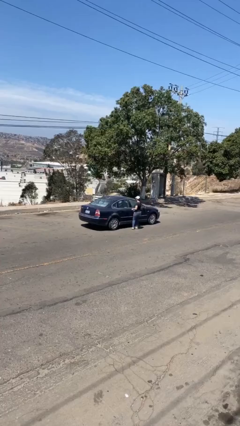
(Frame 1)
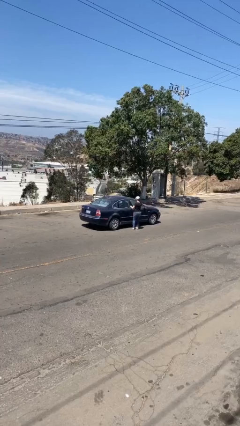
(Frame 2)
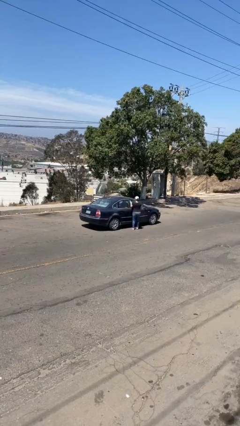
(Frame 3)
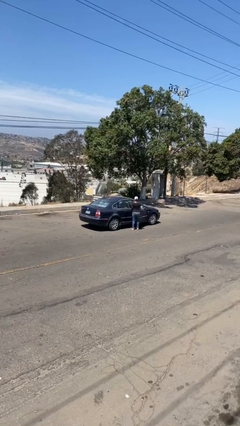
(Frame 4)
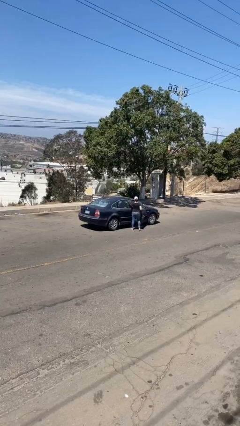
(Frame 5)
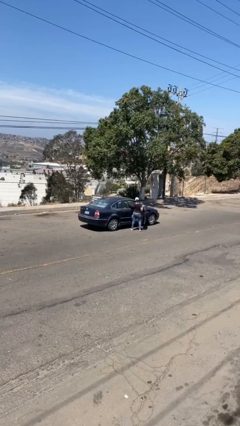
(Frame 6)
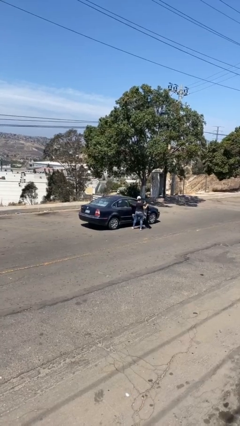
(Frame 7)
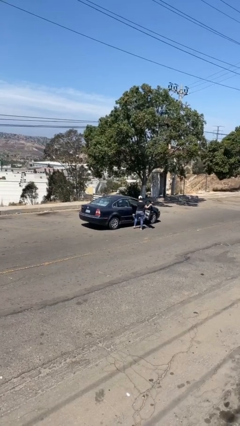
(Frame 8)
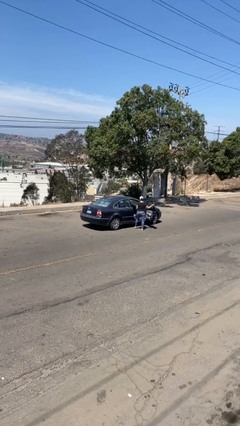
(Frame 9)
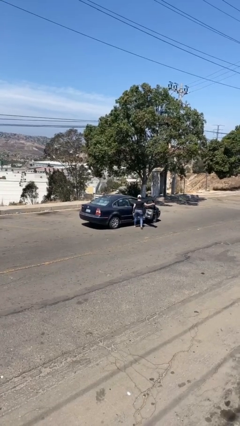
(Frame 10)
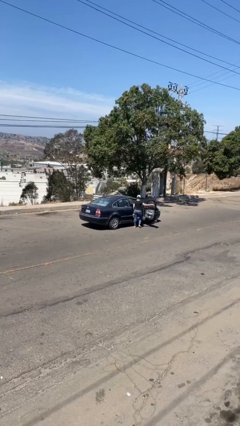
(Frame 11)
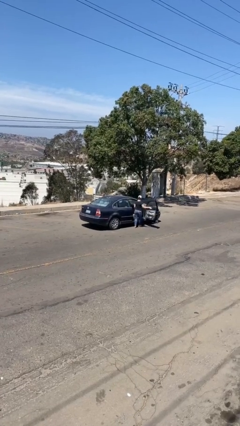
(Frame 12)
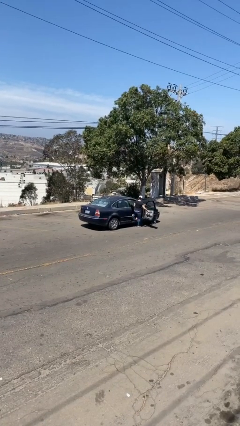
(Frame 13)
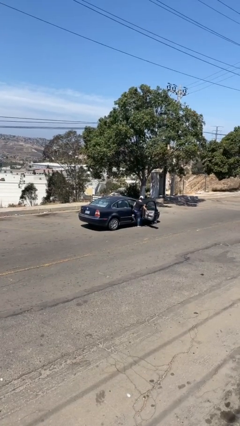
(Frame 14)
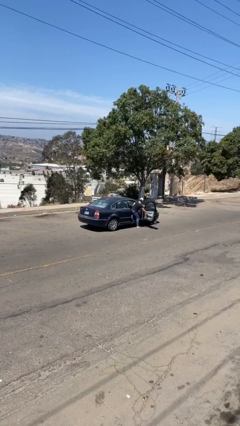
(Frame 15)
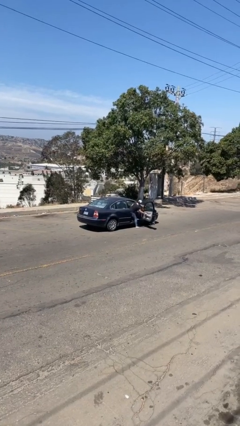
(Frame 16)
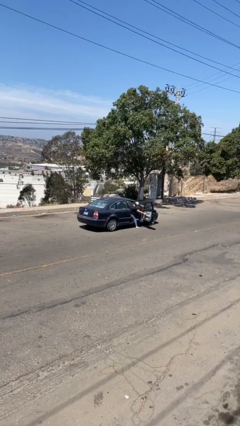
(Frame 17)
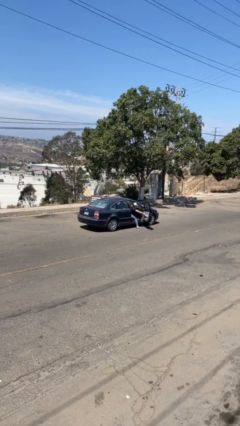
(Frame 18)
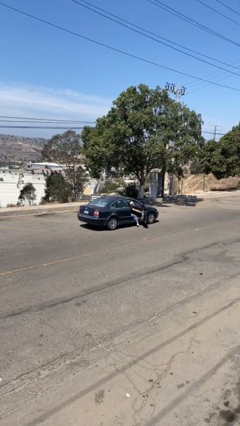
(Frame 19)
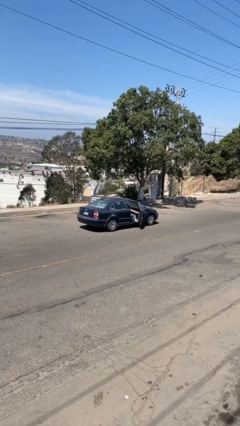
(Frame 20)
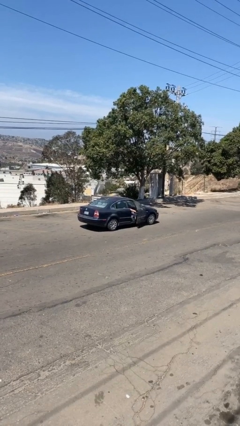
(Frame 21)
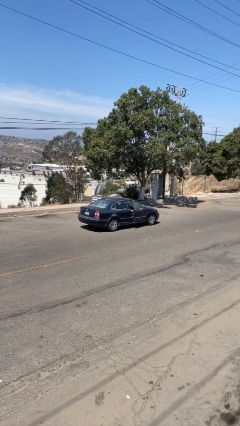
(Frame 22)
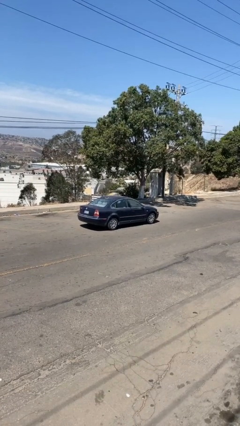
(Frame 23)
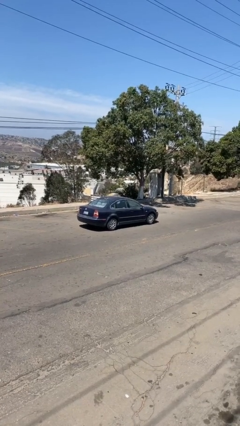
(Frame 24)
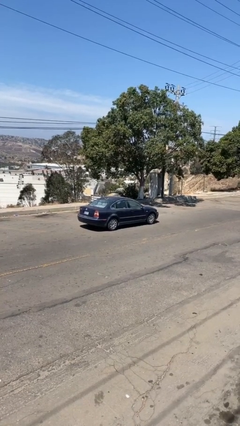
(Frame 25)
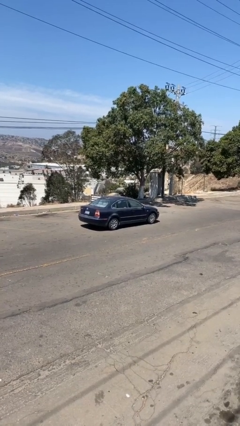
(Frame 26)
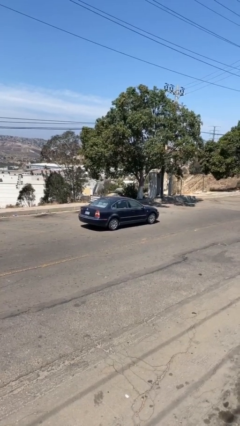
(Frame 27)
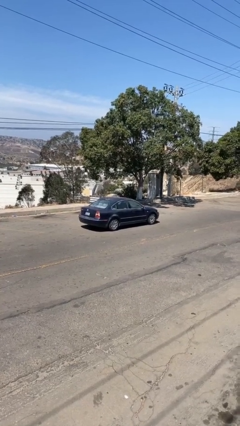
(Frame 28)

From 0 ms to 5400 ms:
car picks up person

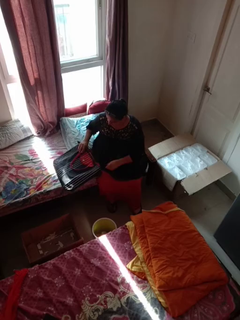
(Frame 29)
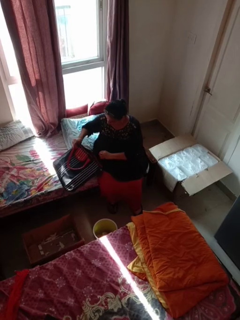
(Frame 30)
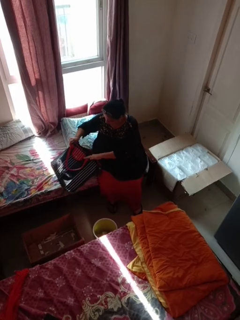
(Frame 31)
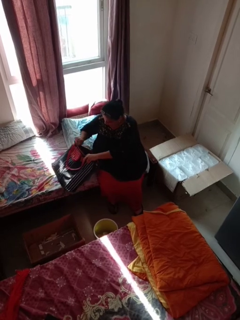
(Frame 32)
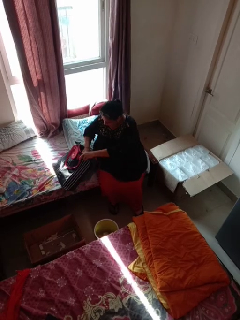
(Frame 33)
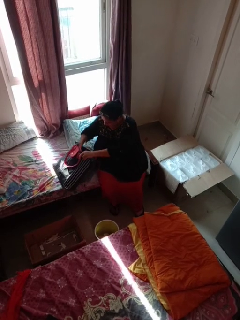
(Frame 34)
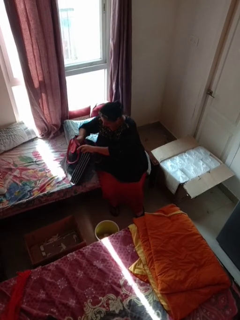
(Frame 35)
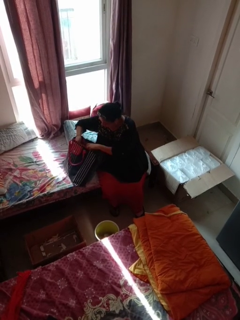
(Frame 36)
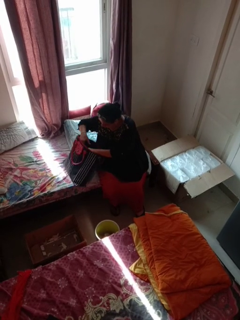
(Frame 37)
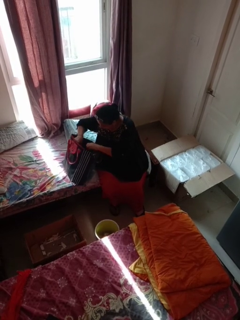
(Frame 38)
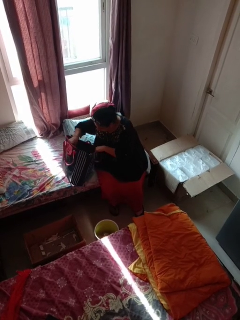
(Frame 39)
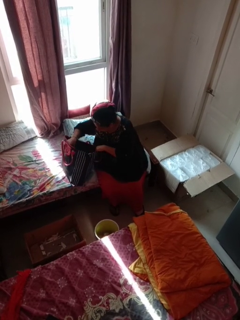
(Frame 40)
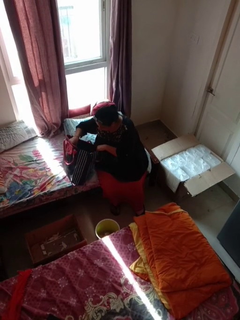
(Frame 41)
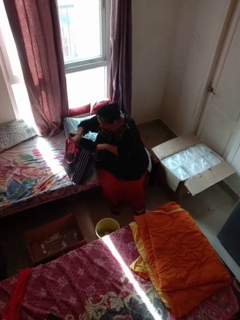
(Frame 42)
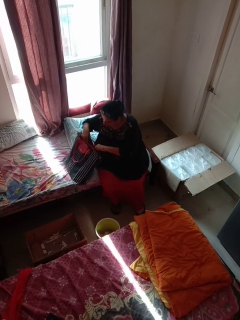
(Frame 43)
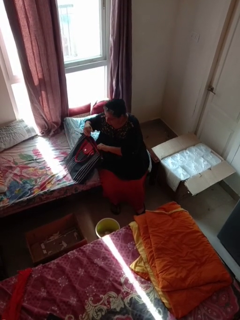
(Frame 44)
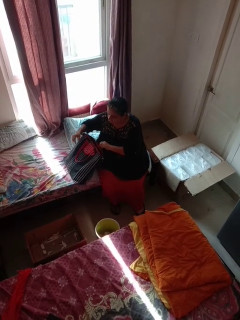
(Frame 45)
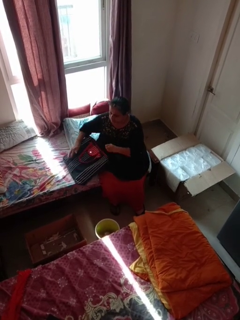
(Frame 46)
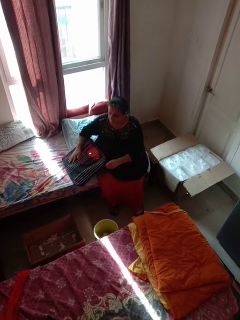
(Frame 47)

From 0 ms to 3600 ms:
person searches in bag

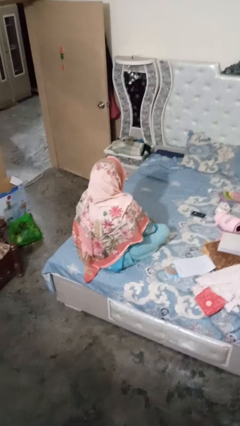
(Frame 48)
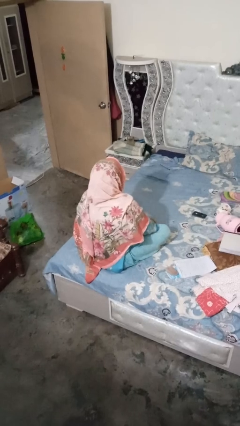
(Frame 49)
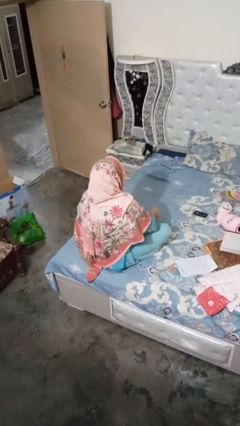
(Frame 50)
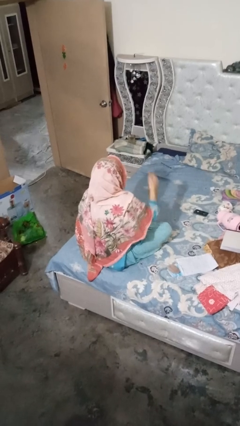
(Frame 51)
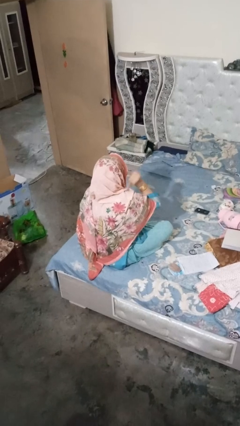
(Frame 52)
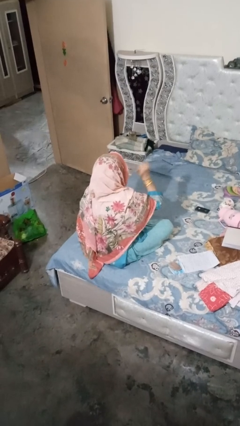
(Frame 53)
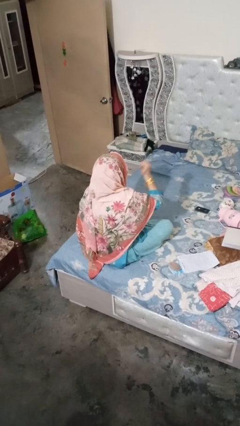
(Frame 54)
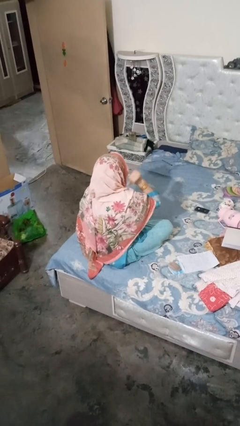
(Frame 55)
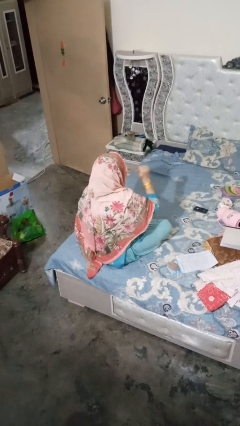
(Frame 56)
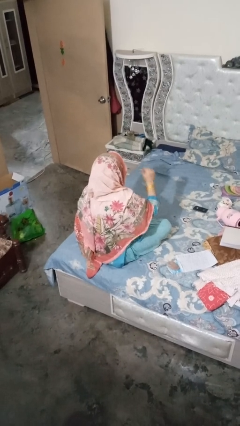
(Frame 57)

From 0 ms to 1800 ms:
person gestures behind me

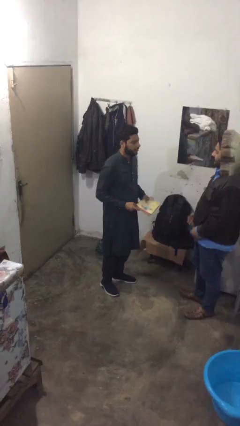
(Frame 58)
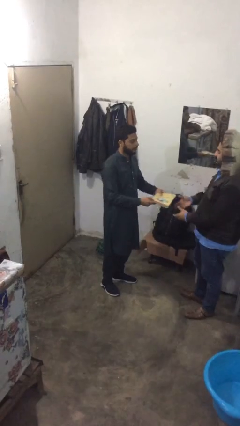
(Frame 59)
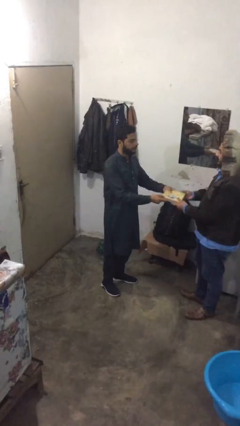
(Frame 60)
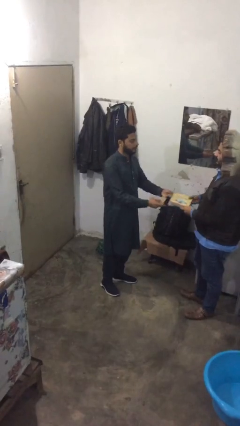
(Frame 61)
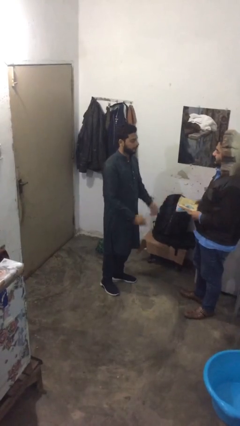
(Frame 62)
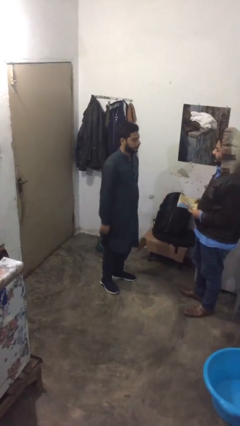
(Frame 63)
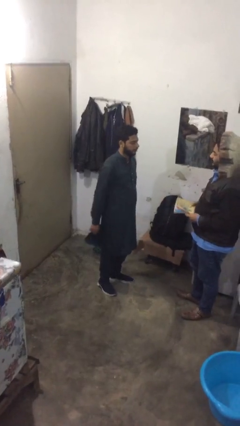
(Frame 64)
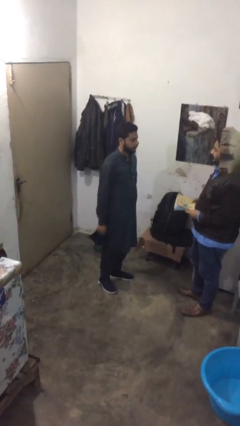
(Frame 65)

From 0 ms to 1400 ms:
person transfers object to person

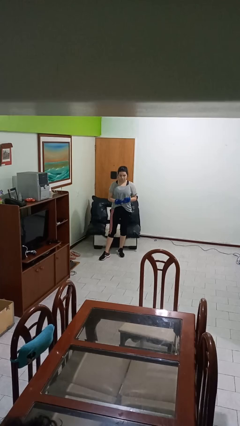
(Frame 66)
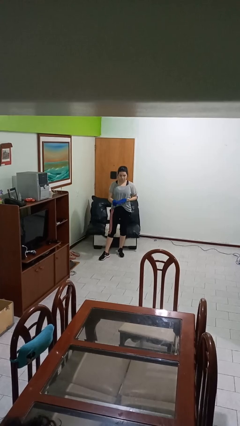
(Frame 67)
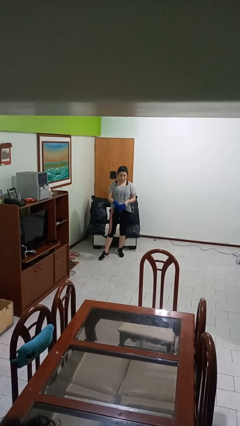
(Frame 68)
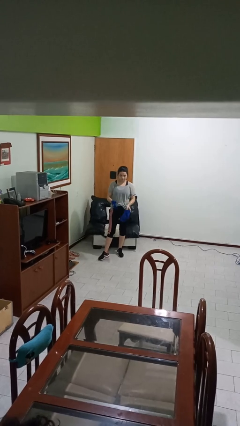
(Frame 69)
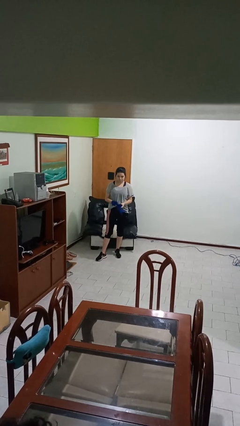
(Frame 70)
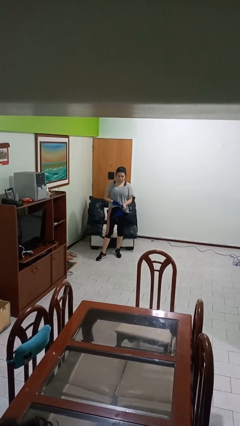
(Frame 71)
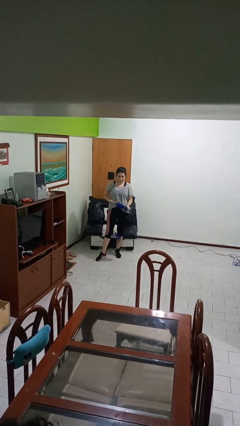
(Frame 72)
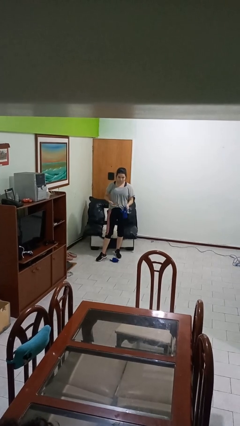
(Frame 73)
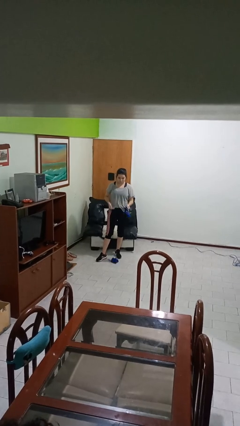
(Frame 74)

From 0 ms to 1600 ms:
person takes off gloves

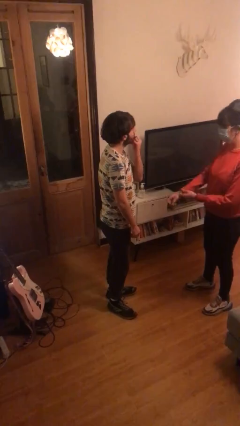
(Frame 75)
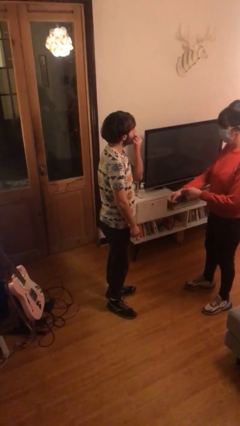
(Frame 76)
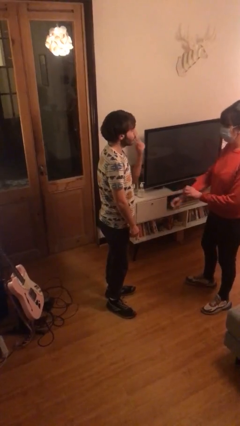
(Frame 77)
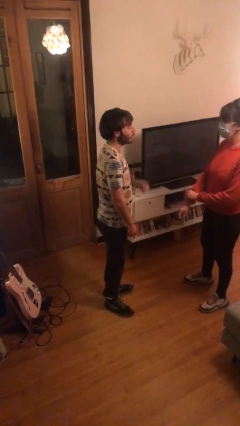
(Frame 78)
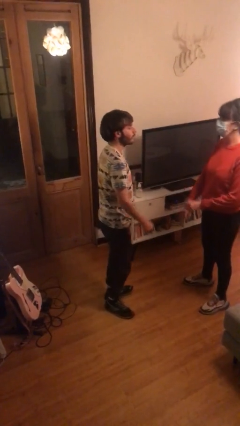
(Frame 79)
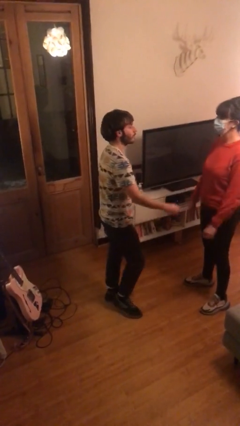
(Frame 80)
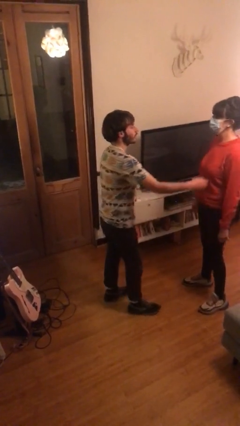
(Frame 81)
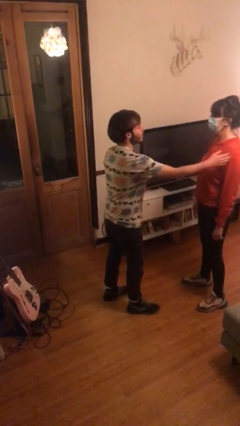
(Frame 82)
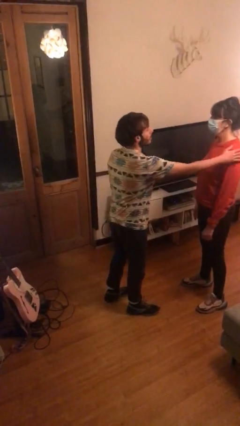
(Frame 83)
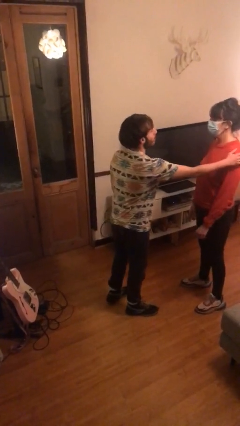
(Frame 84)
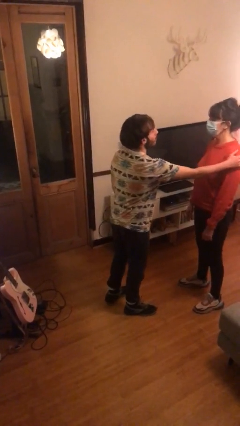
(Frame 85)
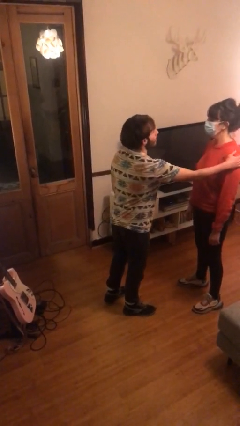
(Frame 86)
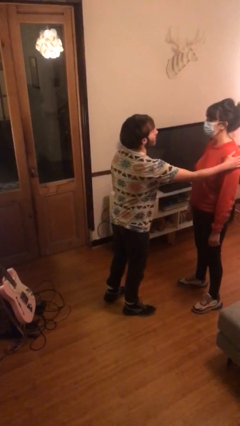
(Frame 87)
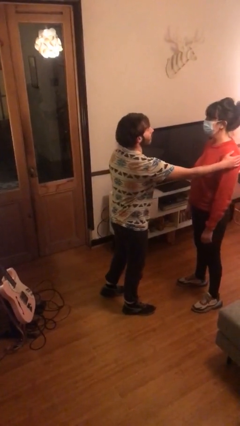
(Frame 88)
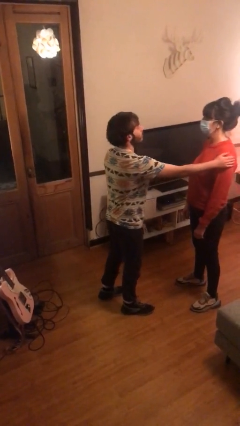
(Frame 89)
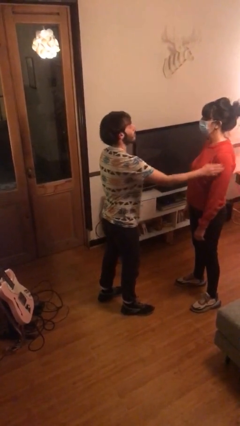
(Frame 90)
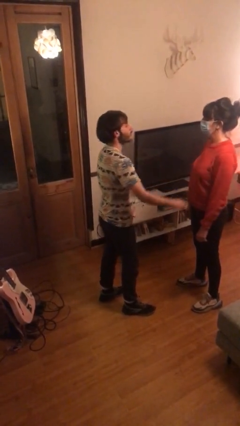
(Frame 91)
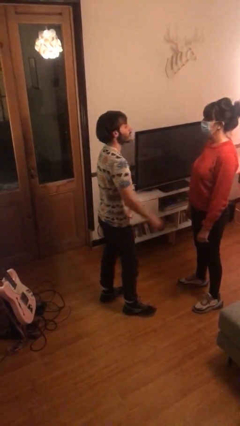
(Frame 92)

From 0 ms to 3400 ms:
person pounds shoulders of person

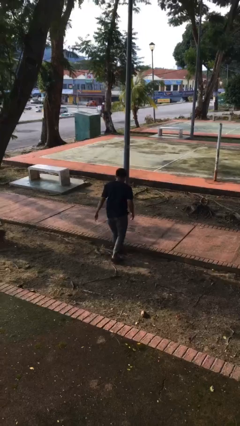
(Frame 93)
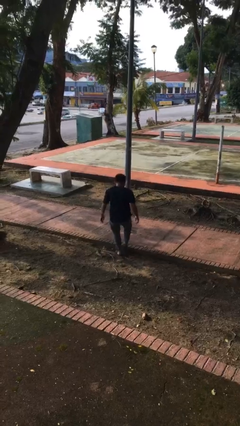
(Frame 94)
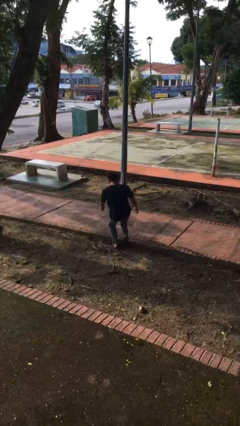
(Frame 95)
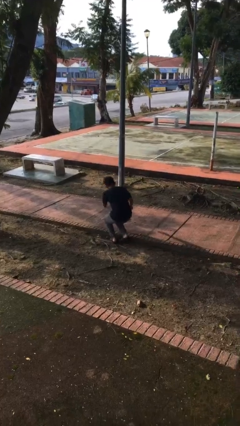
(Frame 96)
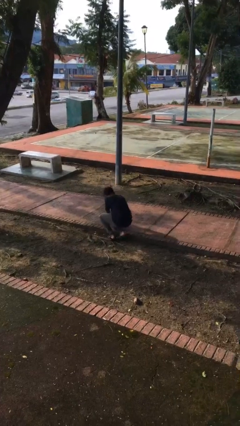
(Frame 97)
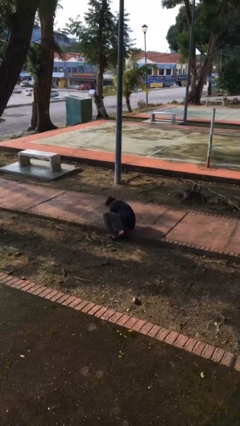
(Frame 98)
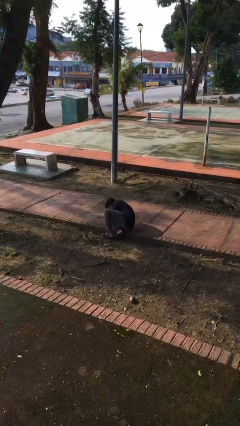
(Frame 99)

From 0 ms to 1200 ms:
person trips on object on floor
